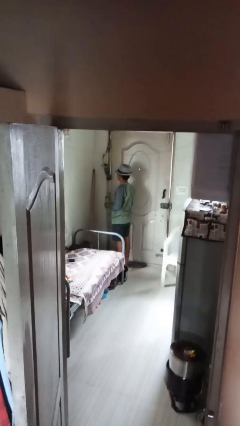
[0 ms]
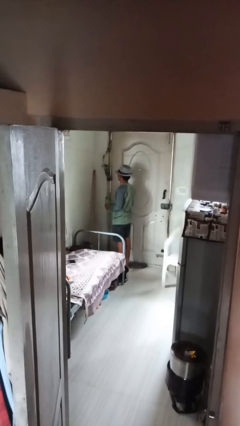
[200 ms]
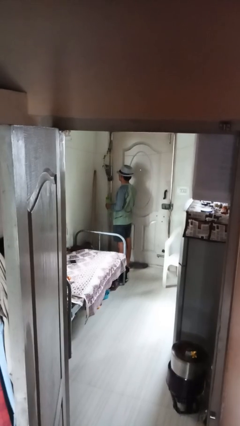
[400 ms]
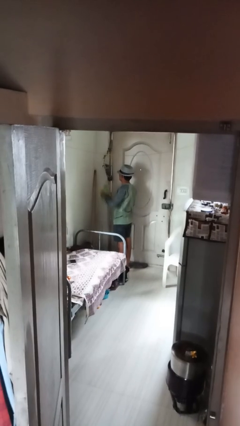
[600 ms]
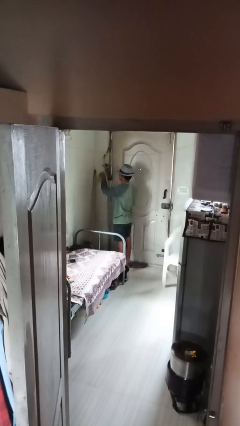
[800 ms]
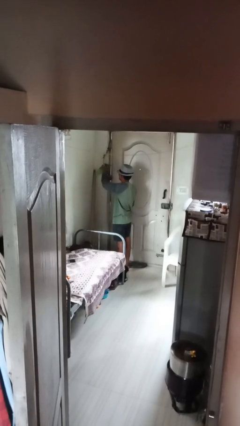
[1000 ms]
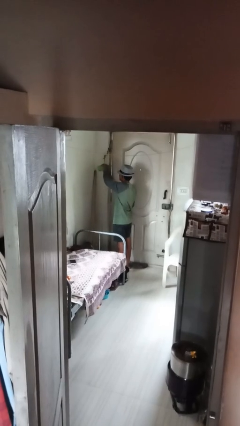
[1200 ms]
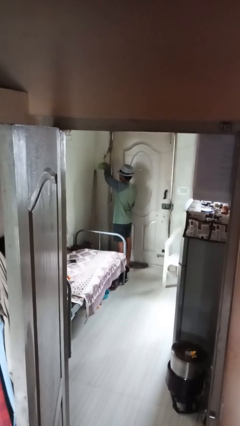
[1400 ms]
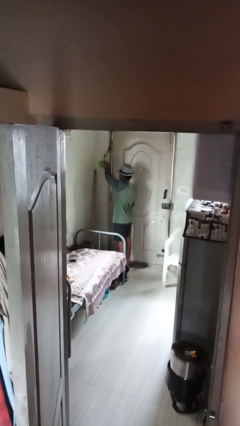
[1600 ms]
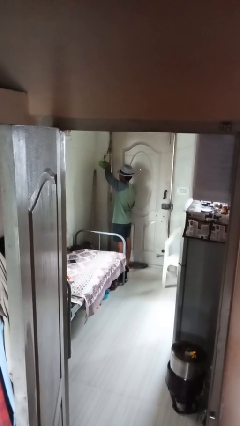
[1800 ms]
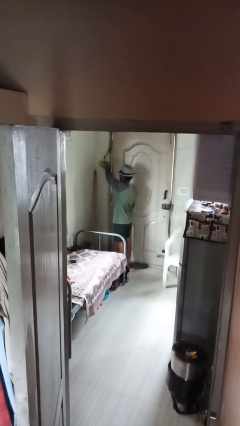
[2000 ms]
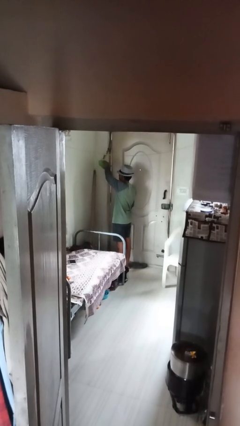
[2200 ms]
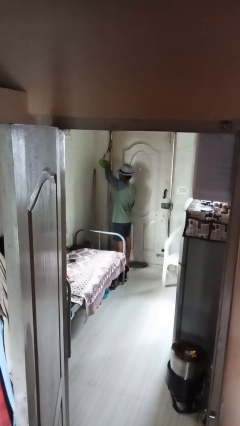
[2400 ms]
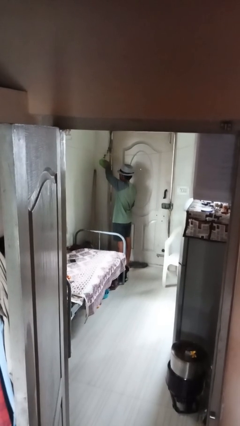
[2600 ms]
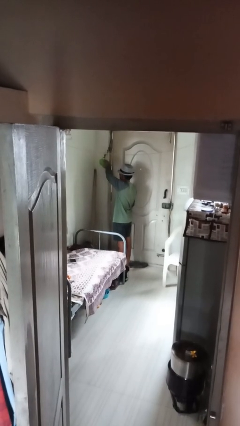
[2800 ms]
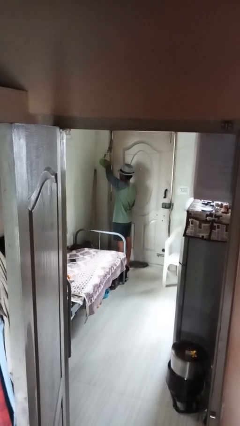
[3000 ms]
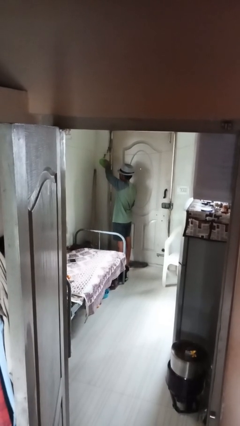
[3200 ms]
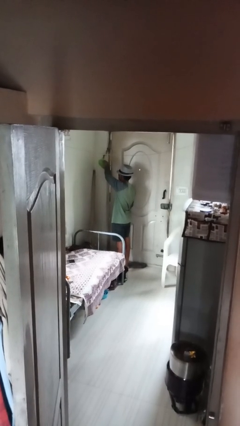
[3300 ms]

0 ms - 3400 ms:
person waters houseplant

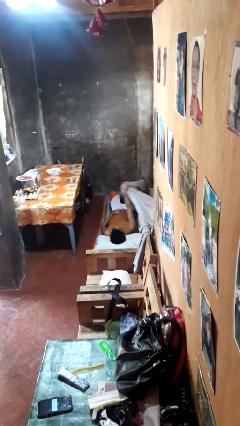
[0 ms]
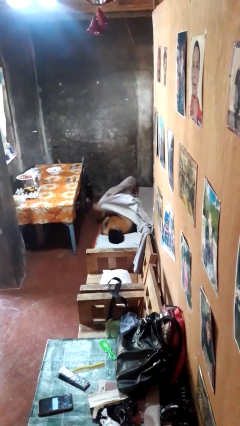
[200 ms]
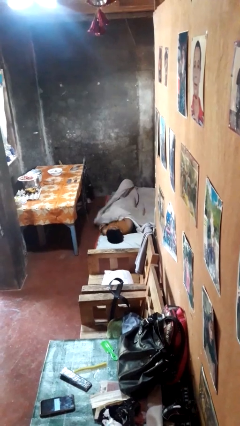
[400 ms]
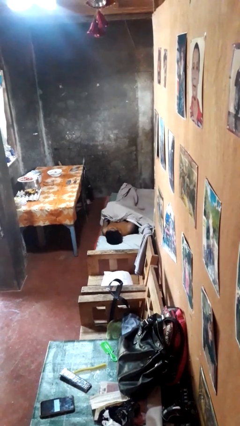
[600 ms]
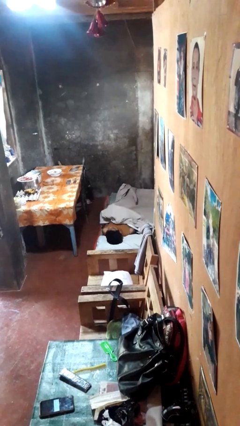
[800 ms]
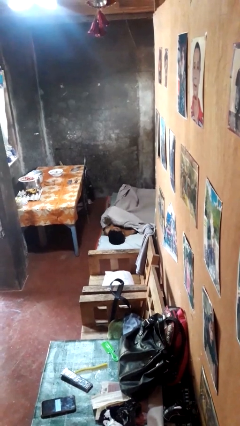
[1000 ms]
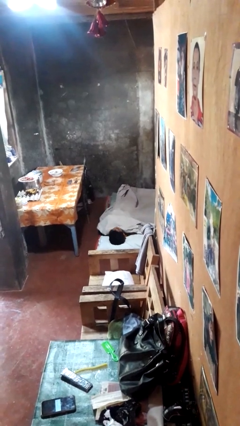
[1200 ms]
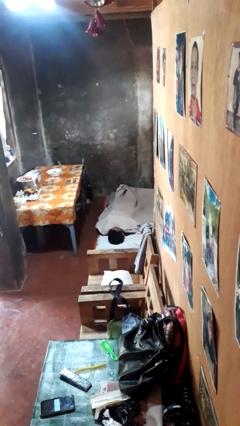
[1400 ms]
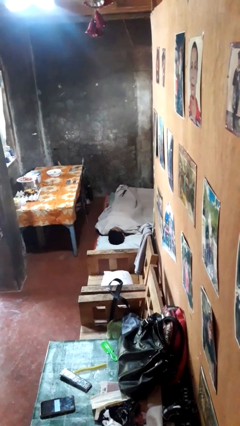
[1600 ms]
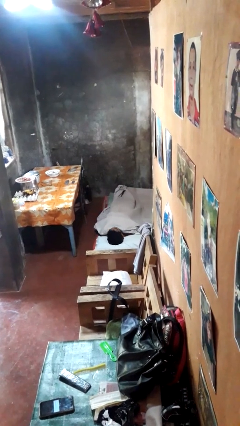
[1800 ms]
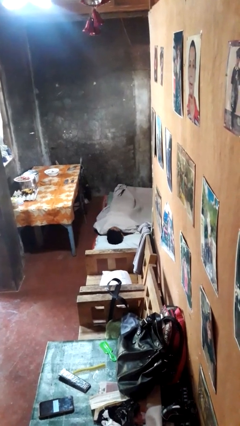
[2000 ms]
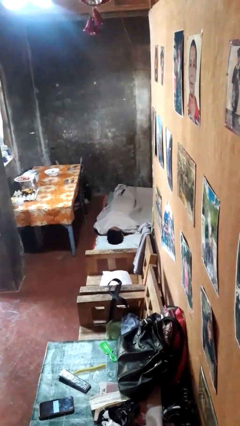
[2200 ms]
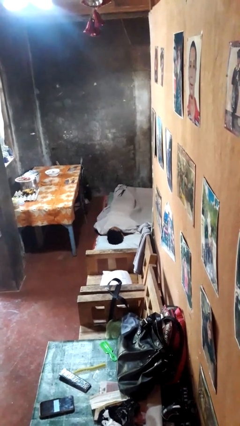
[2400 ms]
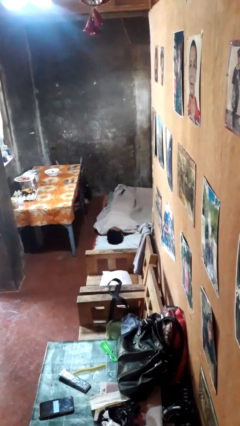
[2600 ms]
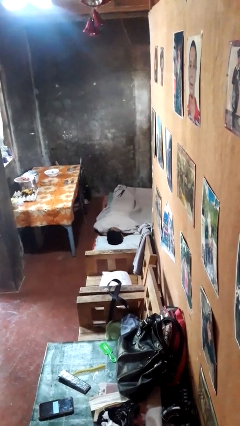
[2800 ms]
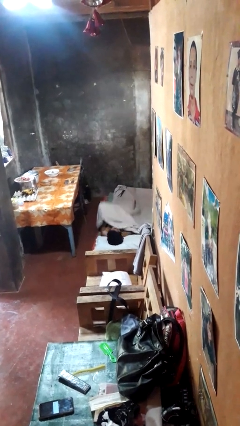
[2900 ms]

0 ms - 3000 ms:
person covers with bedsheets

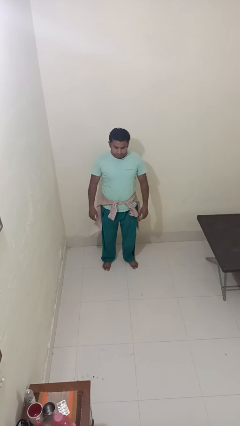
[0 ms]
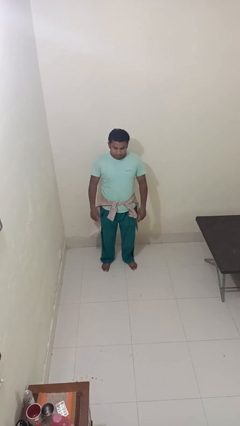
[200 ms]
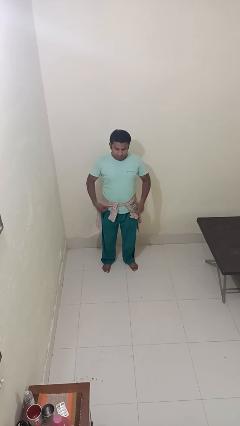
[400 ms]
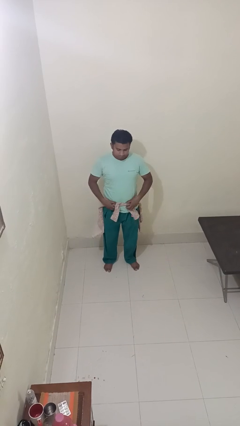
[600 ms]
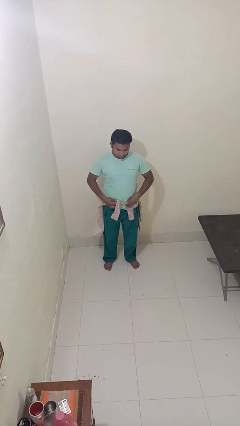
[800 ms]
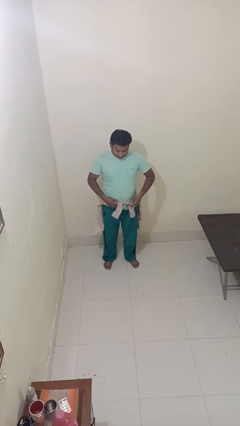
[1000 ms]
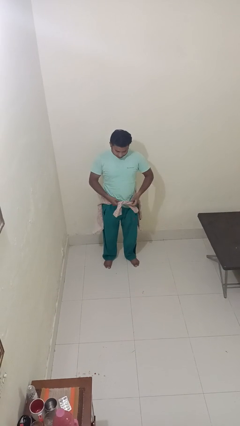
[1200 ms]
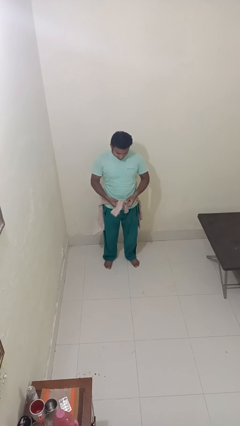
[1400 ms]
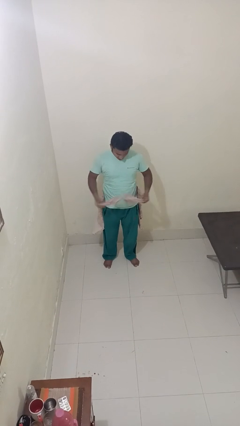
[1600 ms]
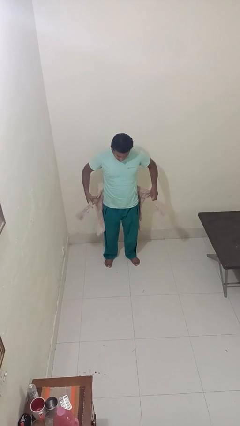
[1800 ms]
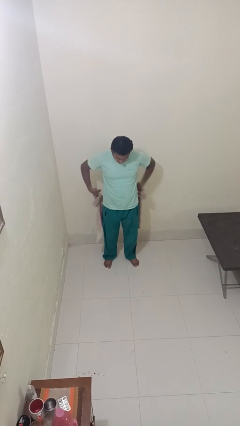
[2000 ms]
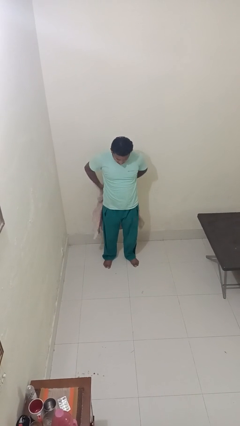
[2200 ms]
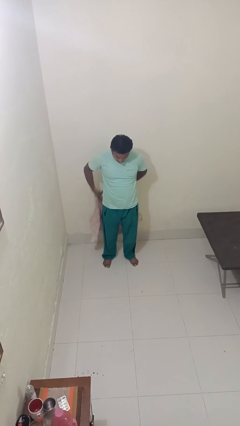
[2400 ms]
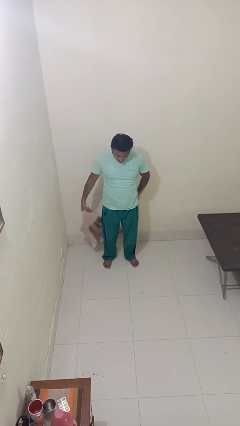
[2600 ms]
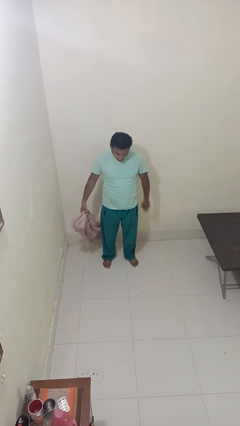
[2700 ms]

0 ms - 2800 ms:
person unties jacket around waist

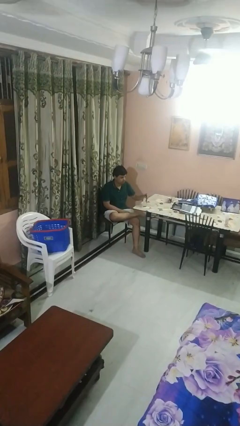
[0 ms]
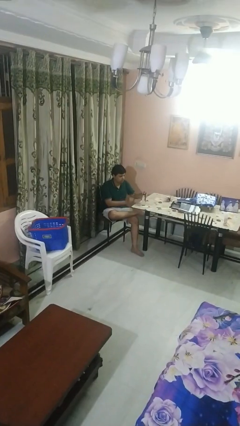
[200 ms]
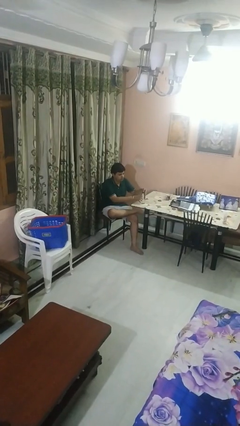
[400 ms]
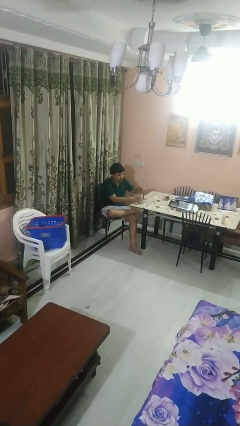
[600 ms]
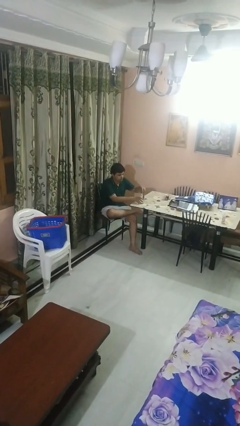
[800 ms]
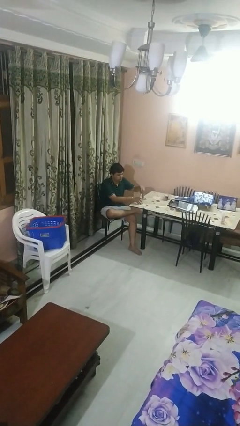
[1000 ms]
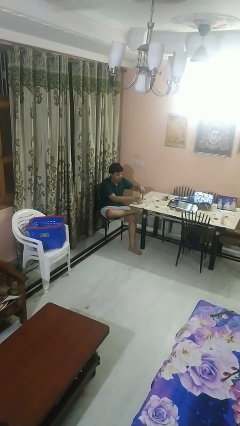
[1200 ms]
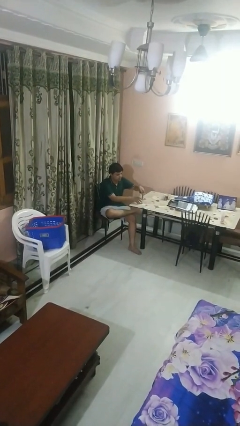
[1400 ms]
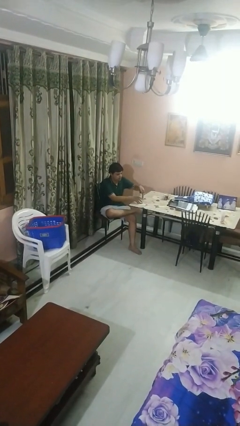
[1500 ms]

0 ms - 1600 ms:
person screws lid to bottle

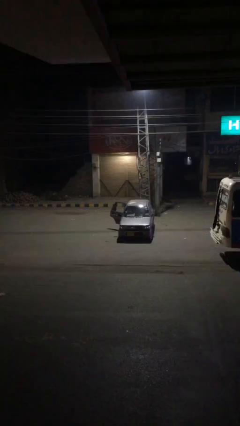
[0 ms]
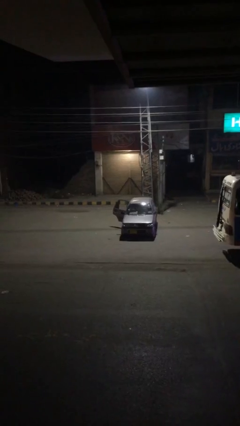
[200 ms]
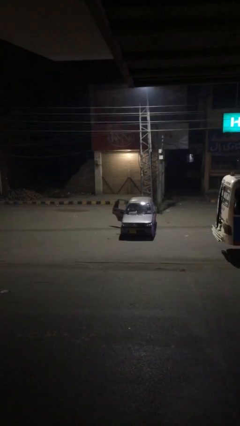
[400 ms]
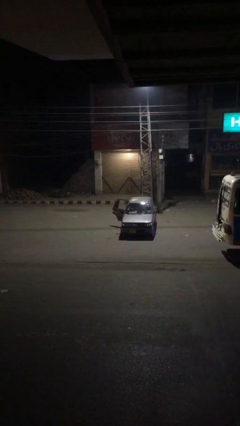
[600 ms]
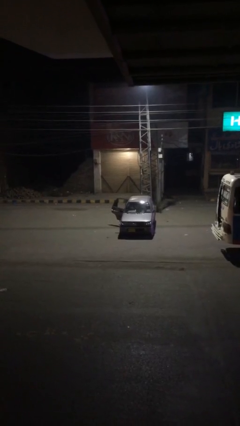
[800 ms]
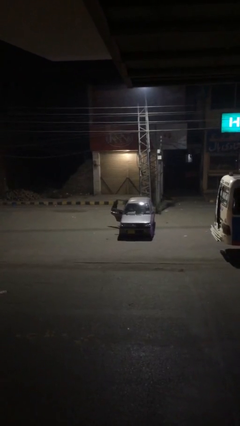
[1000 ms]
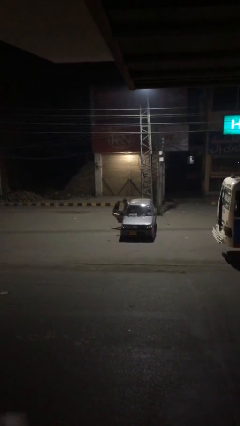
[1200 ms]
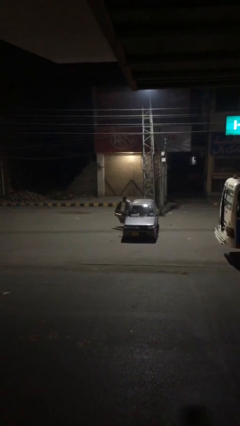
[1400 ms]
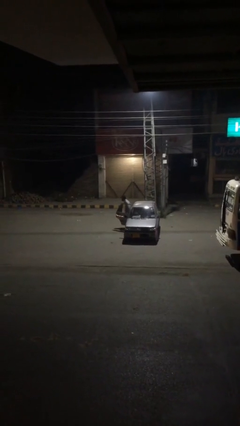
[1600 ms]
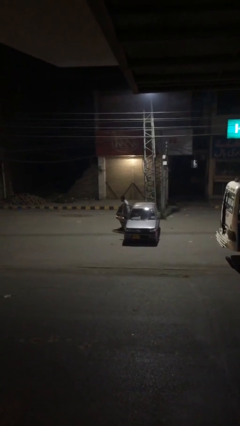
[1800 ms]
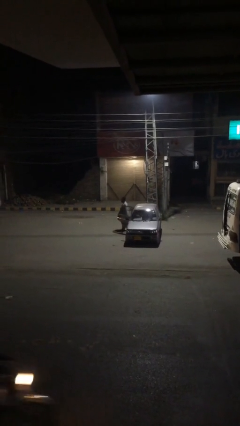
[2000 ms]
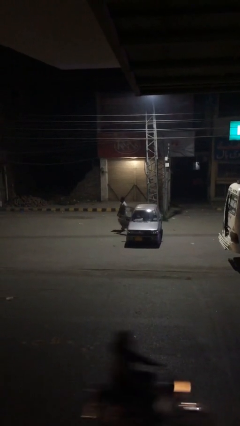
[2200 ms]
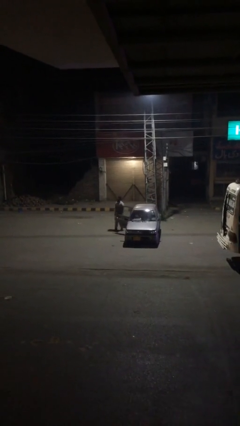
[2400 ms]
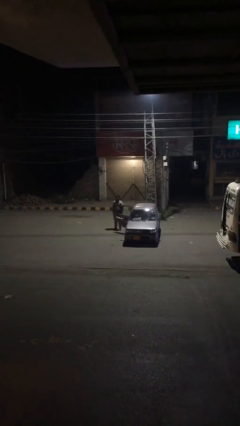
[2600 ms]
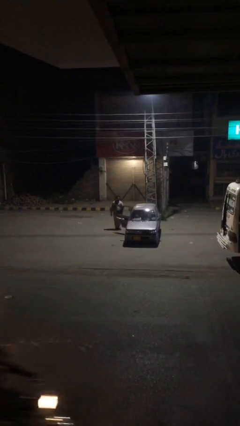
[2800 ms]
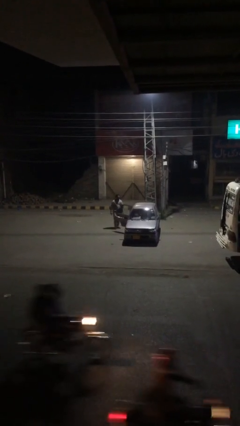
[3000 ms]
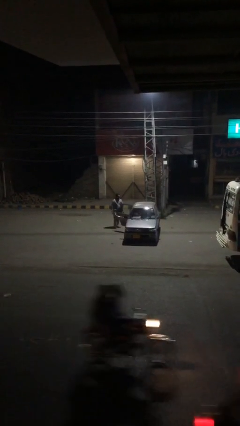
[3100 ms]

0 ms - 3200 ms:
person exits car

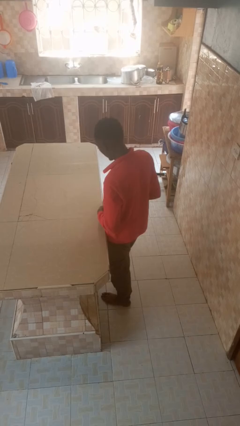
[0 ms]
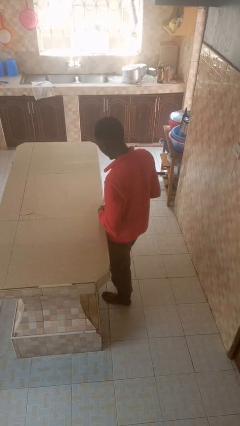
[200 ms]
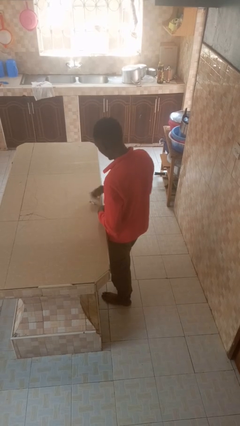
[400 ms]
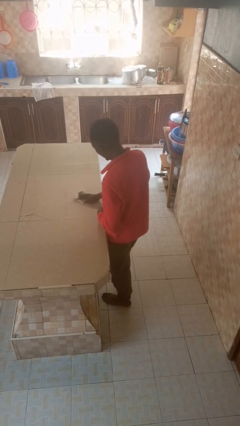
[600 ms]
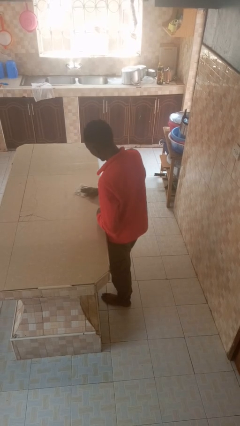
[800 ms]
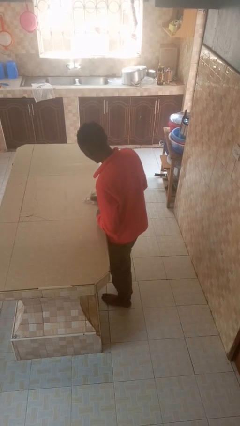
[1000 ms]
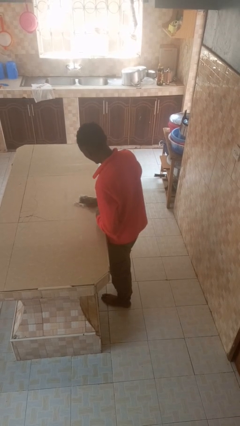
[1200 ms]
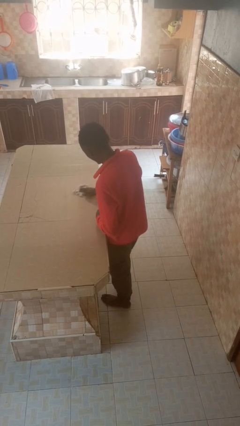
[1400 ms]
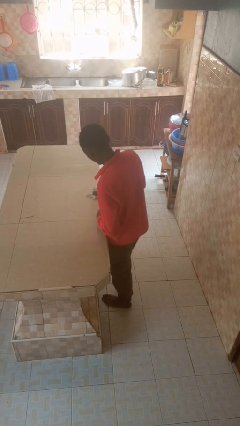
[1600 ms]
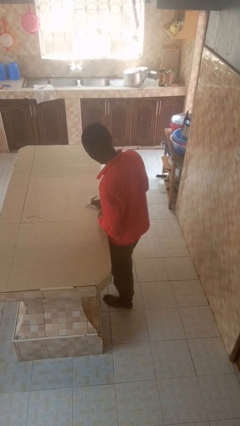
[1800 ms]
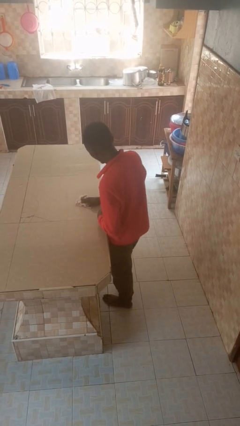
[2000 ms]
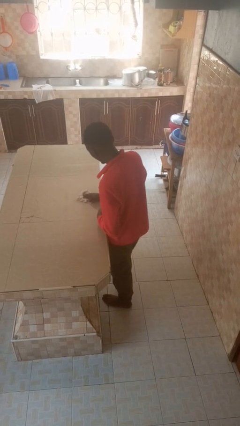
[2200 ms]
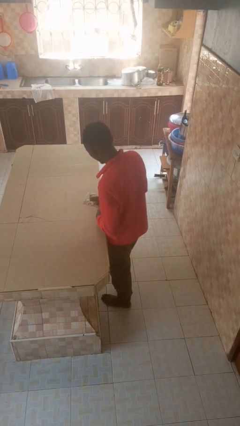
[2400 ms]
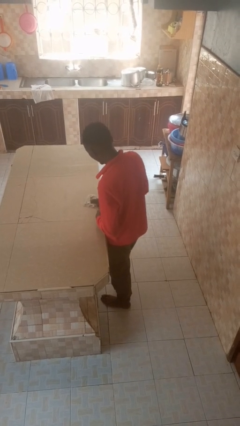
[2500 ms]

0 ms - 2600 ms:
person cleans table with rag

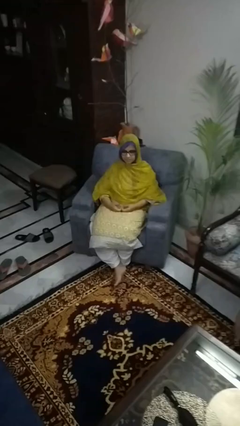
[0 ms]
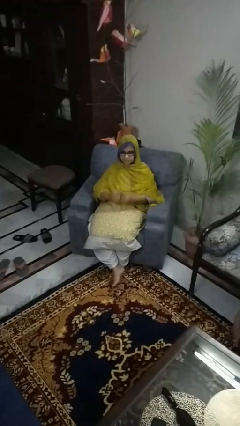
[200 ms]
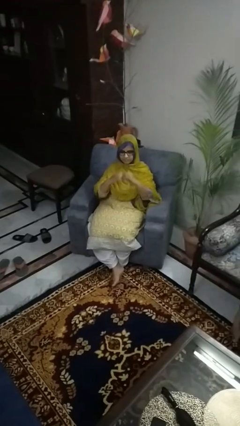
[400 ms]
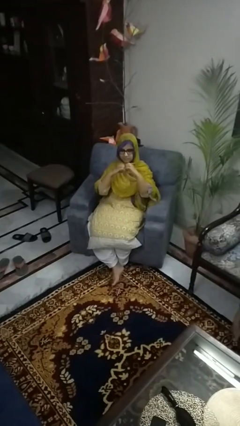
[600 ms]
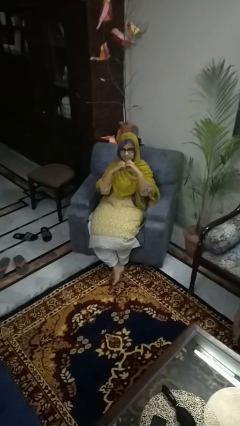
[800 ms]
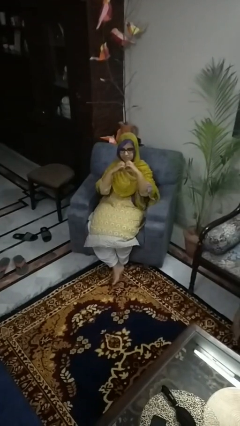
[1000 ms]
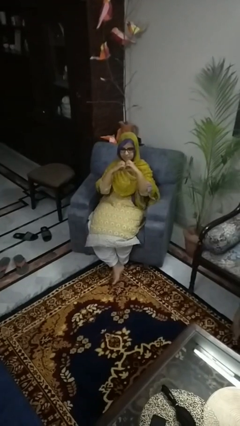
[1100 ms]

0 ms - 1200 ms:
person gestures heart
